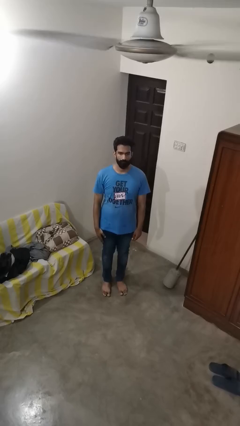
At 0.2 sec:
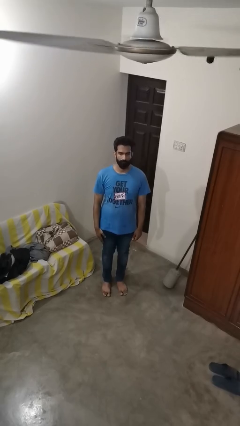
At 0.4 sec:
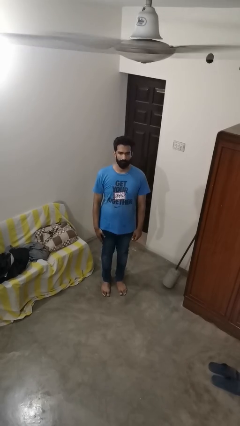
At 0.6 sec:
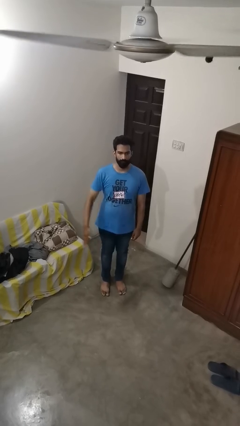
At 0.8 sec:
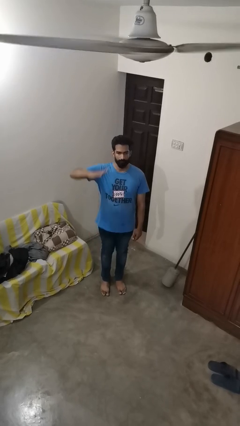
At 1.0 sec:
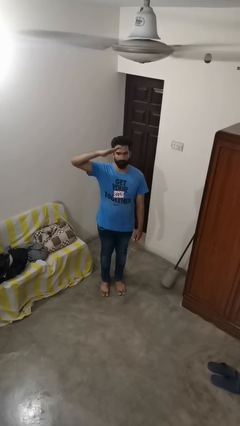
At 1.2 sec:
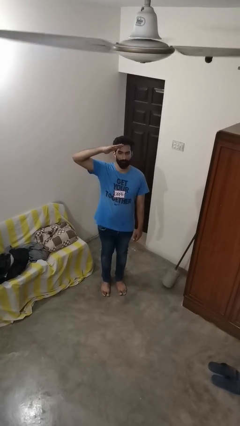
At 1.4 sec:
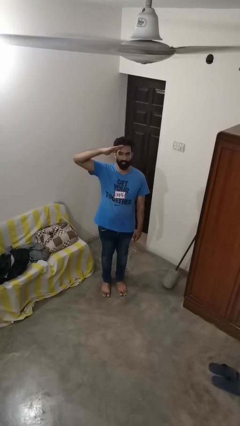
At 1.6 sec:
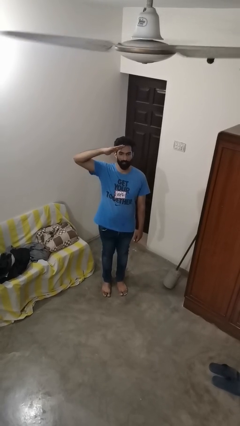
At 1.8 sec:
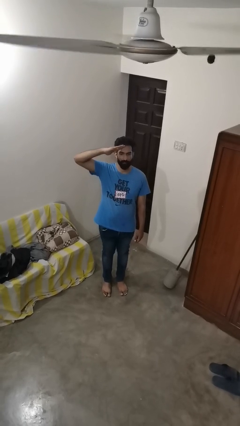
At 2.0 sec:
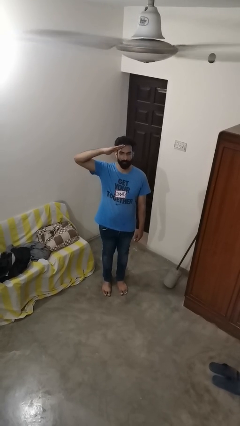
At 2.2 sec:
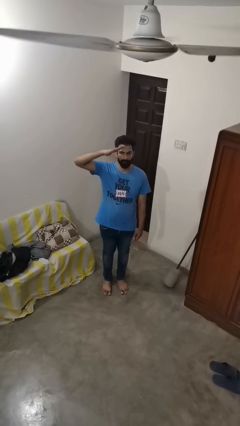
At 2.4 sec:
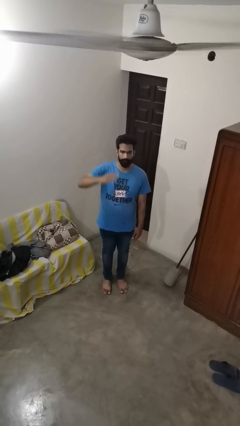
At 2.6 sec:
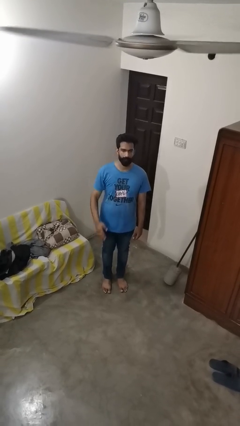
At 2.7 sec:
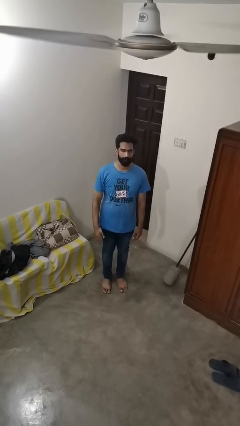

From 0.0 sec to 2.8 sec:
person salutes

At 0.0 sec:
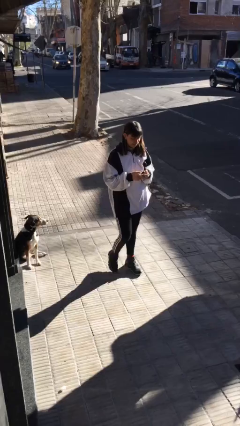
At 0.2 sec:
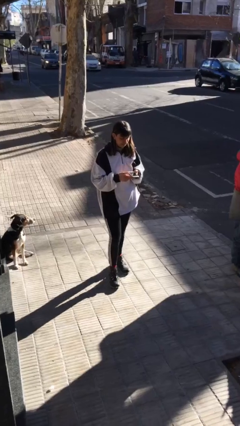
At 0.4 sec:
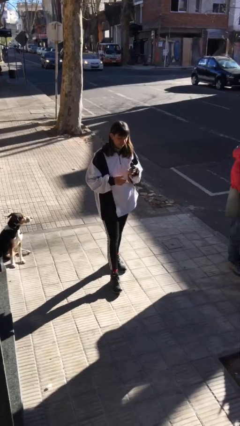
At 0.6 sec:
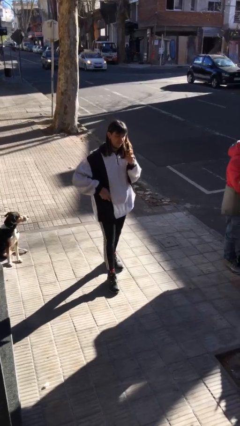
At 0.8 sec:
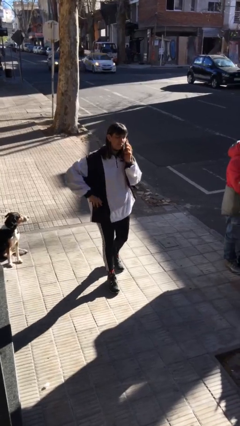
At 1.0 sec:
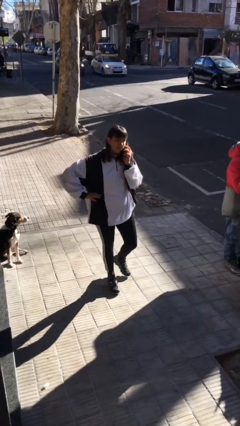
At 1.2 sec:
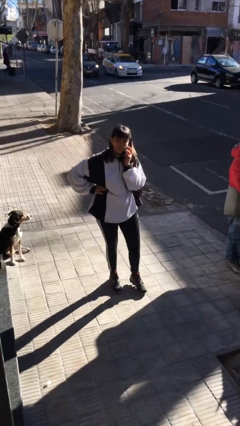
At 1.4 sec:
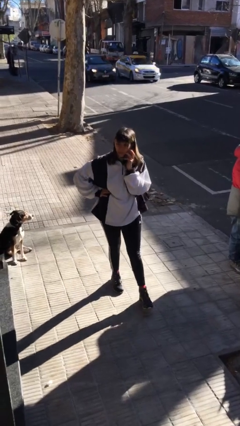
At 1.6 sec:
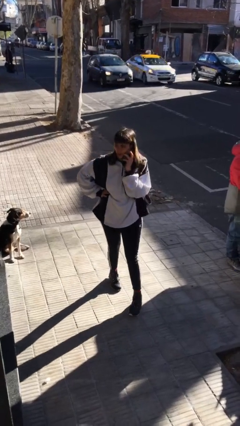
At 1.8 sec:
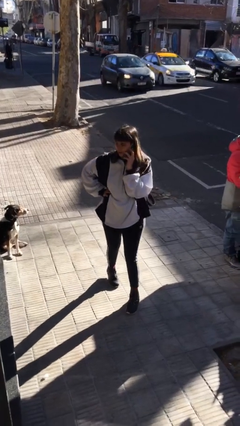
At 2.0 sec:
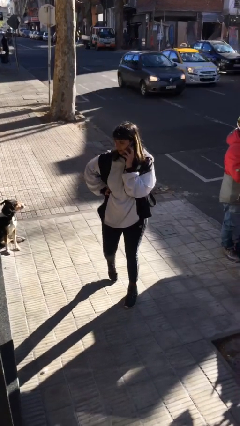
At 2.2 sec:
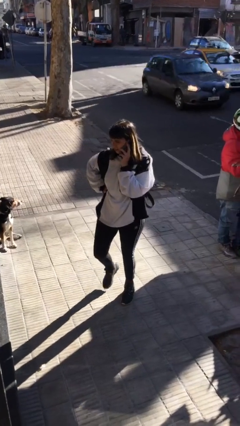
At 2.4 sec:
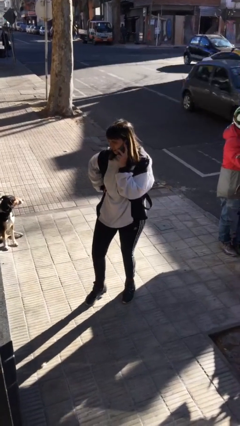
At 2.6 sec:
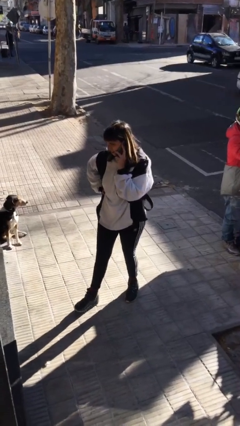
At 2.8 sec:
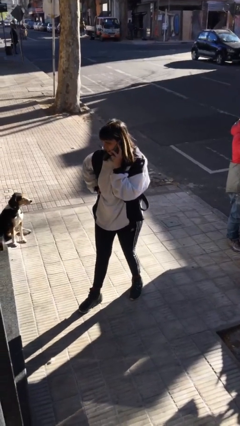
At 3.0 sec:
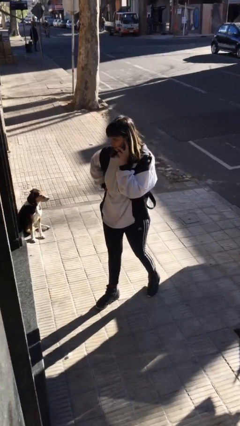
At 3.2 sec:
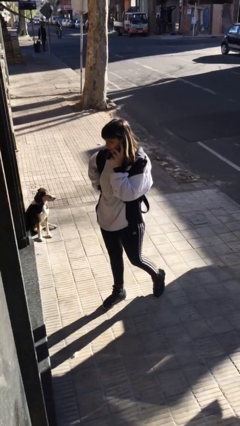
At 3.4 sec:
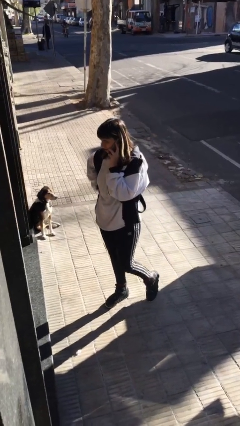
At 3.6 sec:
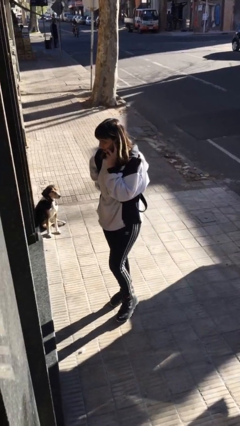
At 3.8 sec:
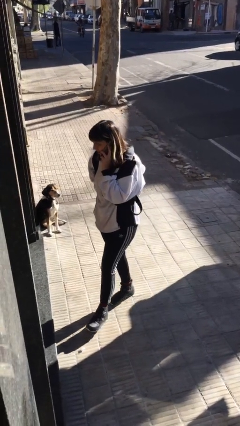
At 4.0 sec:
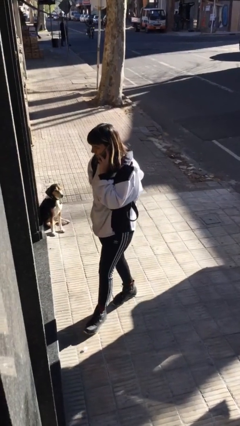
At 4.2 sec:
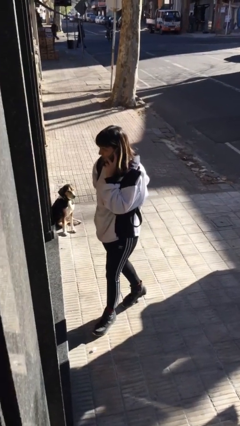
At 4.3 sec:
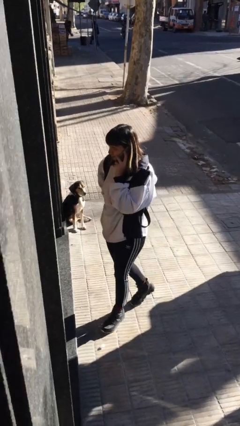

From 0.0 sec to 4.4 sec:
person talks on phone

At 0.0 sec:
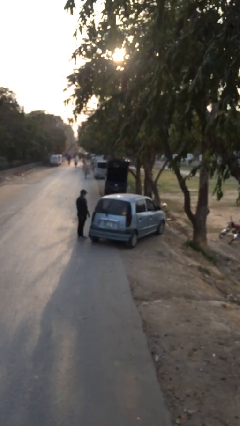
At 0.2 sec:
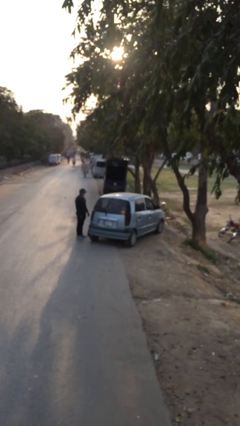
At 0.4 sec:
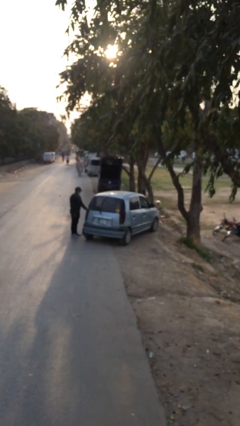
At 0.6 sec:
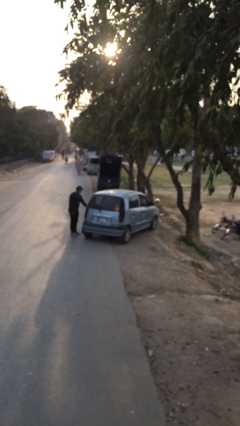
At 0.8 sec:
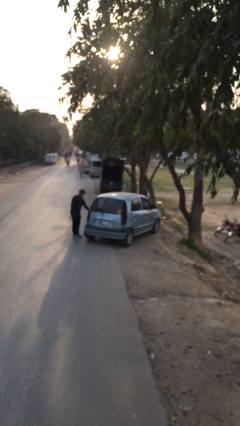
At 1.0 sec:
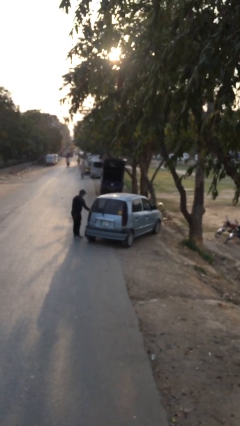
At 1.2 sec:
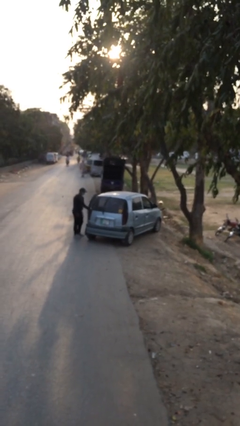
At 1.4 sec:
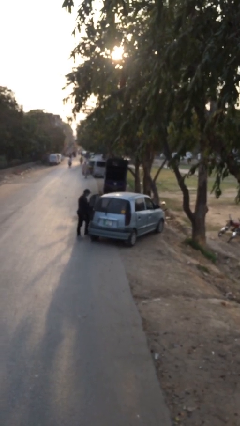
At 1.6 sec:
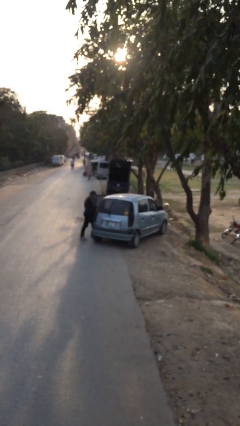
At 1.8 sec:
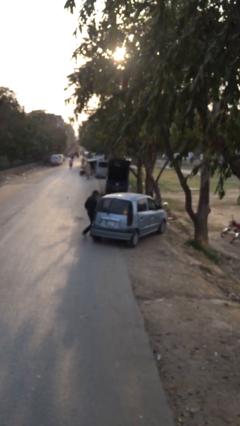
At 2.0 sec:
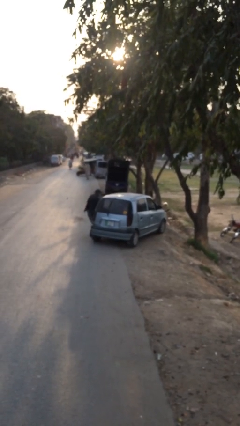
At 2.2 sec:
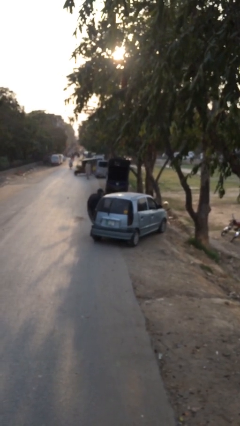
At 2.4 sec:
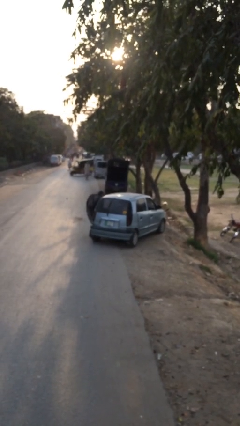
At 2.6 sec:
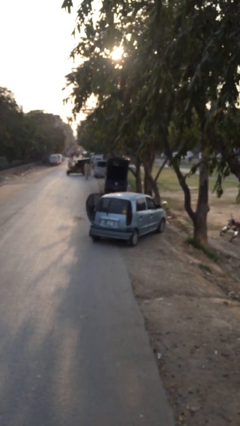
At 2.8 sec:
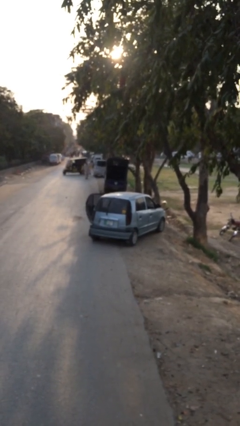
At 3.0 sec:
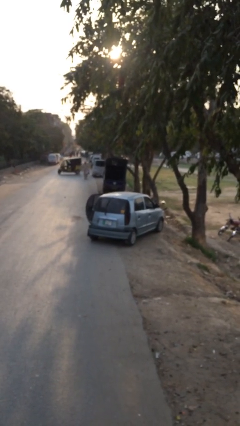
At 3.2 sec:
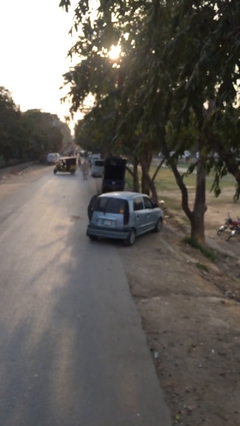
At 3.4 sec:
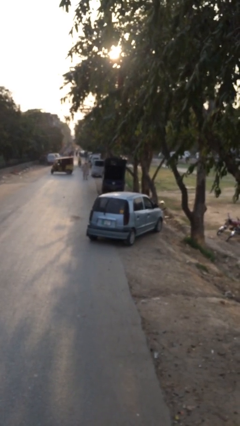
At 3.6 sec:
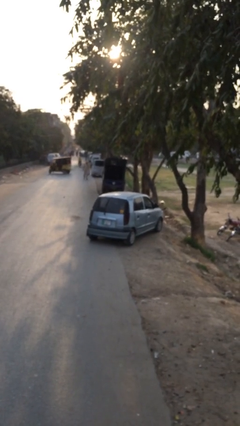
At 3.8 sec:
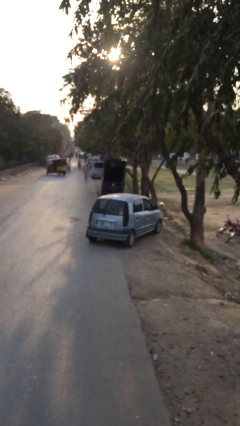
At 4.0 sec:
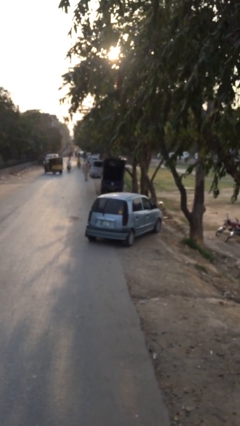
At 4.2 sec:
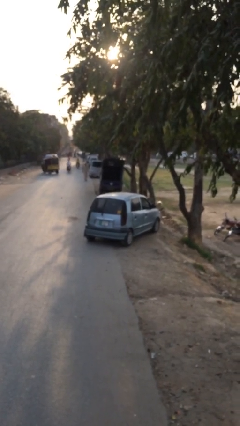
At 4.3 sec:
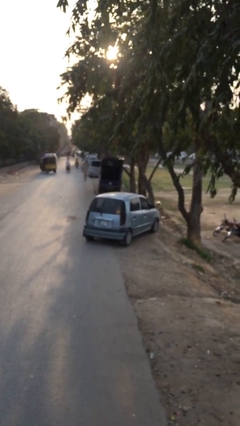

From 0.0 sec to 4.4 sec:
car picks up person

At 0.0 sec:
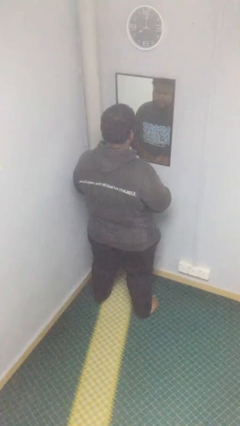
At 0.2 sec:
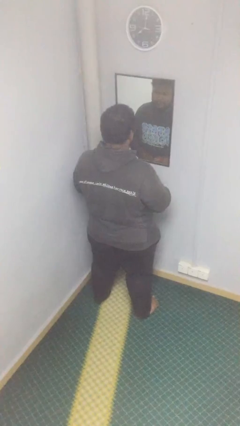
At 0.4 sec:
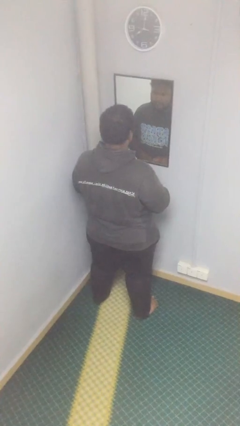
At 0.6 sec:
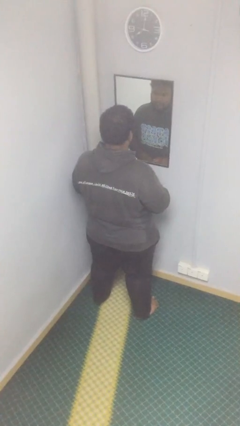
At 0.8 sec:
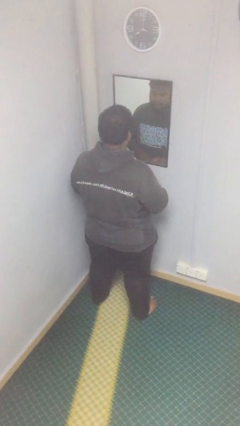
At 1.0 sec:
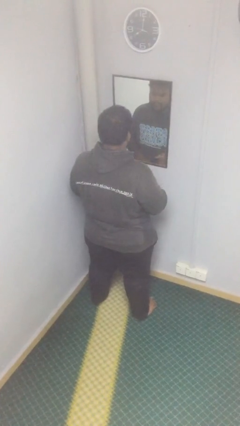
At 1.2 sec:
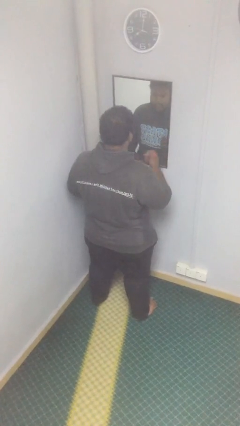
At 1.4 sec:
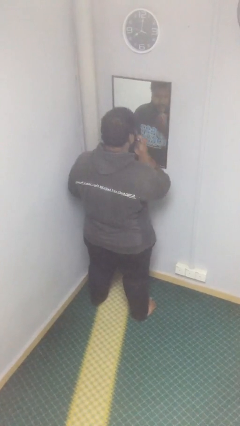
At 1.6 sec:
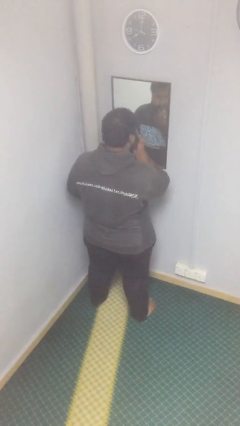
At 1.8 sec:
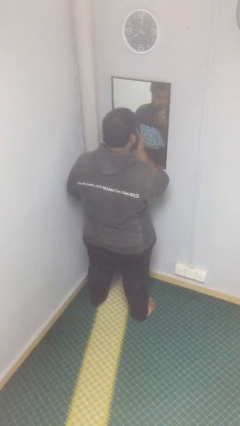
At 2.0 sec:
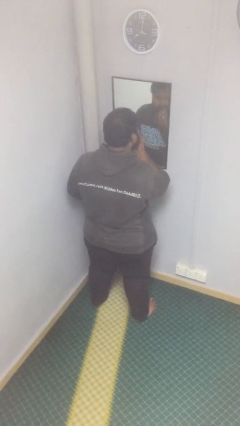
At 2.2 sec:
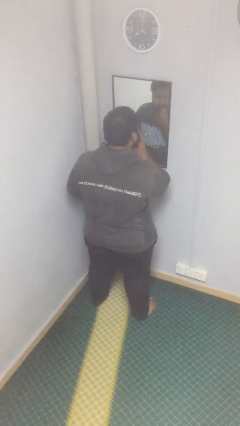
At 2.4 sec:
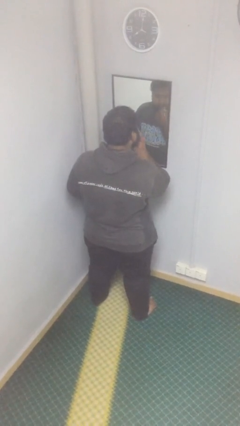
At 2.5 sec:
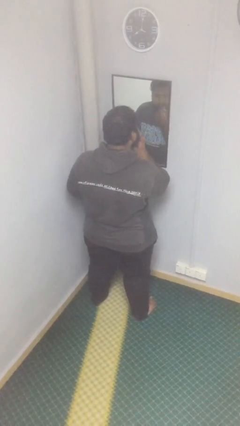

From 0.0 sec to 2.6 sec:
person applies lip makeup

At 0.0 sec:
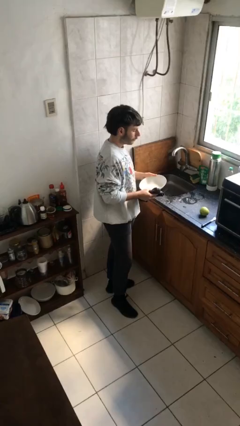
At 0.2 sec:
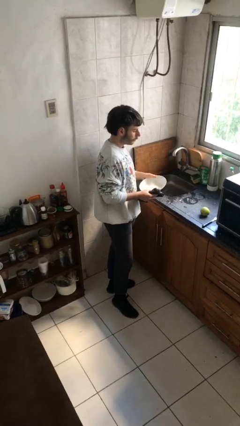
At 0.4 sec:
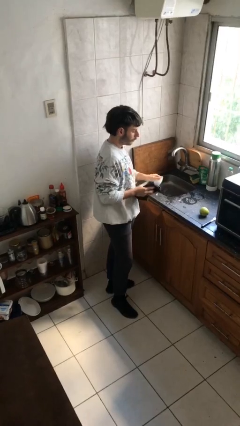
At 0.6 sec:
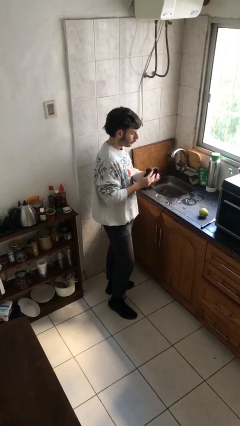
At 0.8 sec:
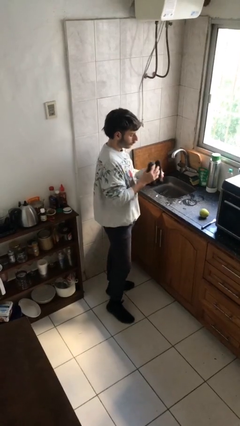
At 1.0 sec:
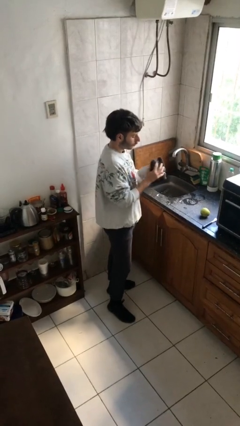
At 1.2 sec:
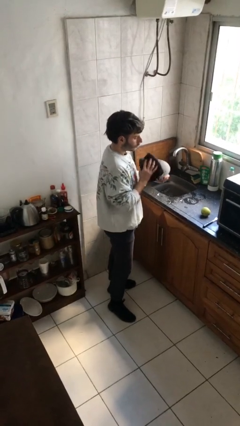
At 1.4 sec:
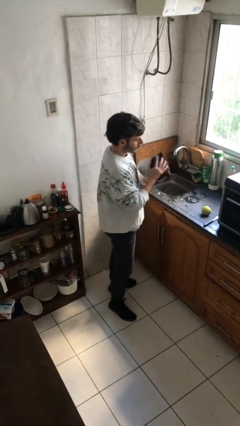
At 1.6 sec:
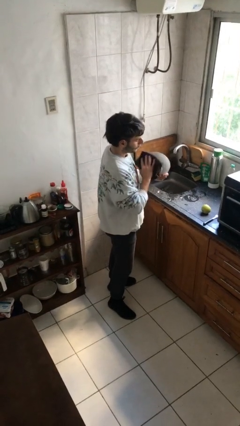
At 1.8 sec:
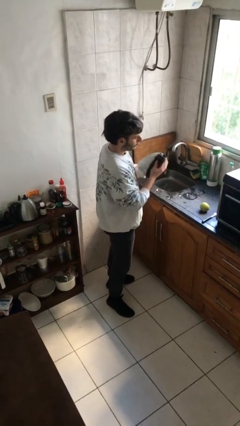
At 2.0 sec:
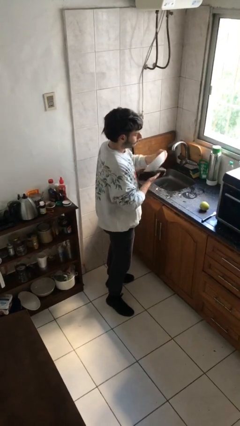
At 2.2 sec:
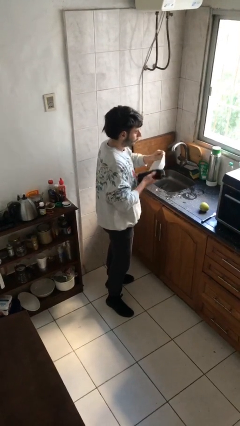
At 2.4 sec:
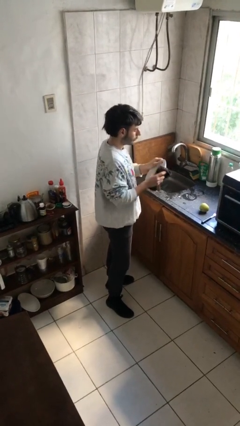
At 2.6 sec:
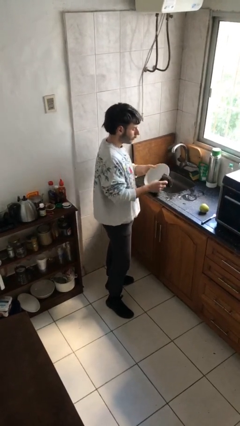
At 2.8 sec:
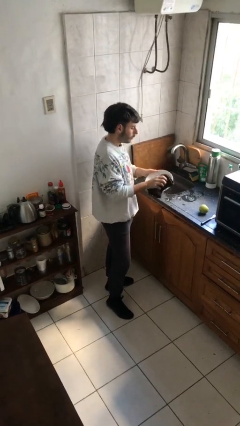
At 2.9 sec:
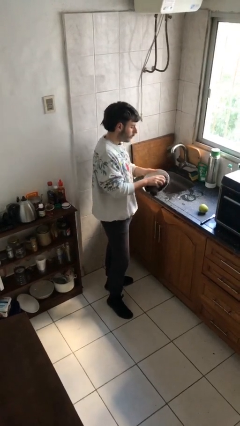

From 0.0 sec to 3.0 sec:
person dries dish

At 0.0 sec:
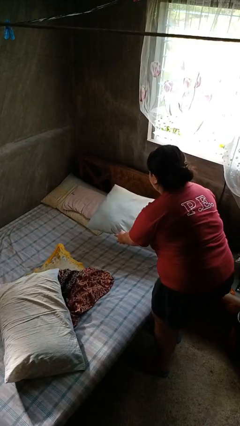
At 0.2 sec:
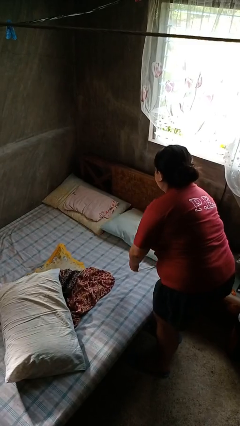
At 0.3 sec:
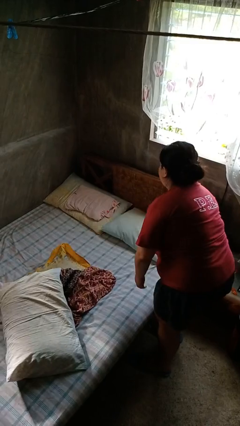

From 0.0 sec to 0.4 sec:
person makes bed
